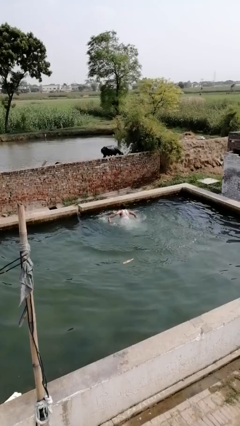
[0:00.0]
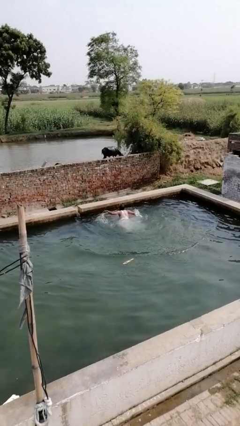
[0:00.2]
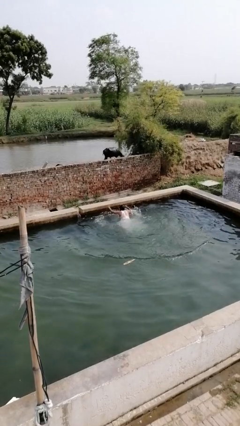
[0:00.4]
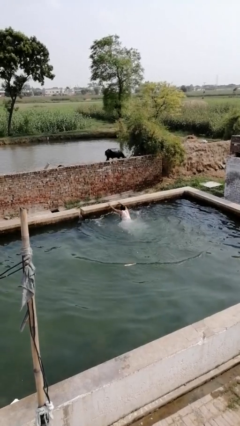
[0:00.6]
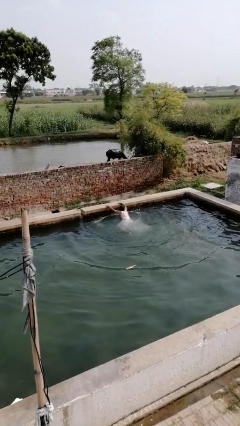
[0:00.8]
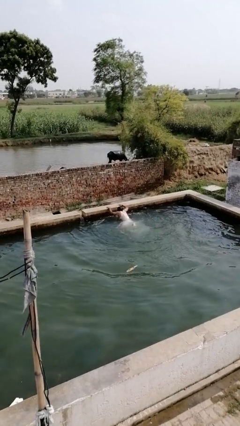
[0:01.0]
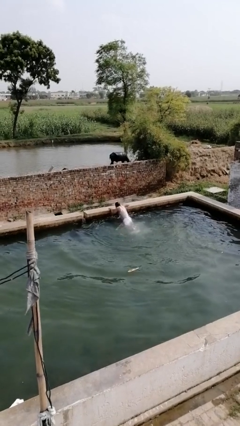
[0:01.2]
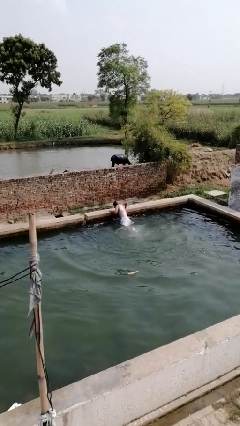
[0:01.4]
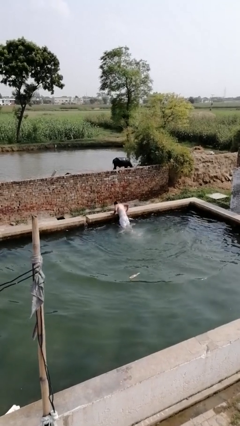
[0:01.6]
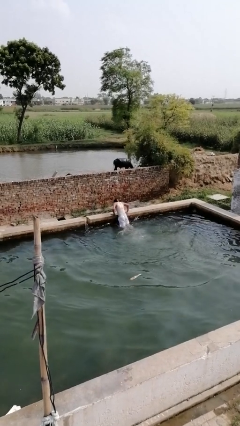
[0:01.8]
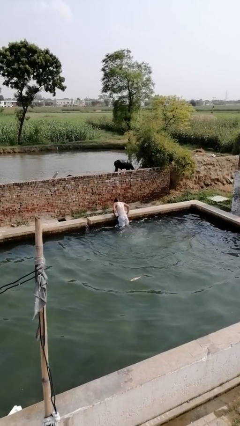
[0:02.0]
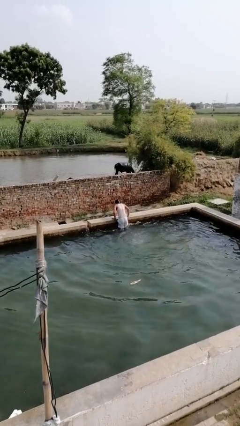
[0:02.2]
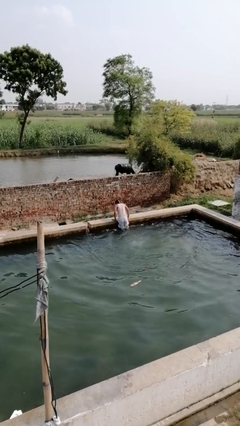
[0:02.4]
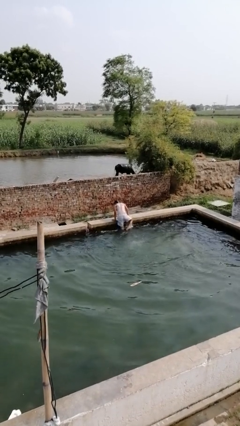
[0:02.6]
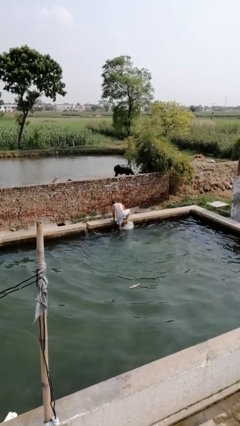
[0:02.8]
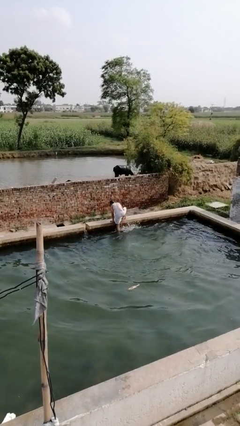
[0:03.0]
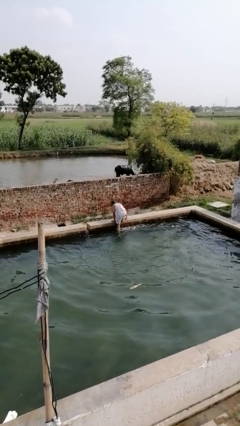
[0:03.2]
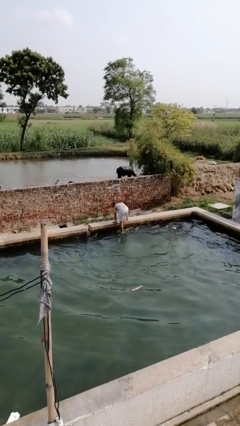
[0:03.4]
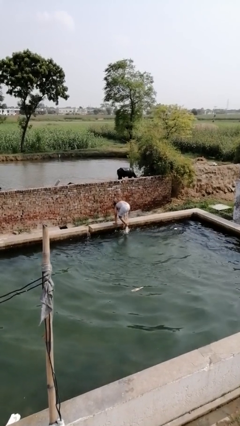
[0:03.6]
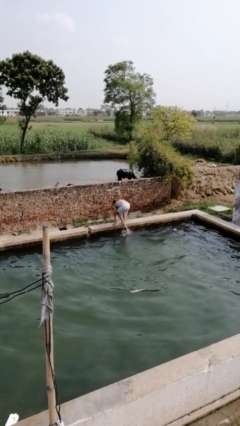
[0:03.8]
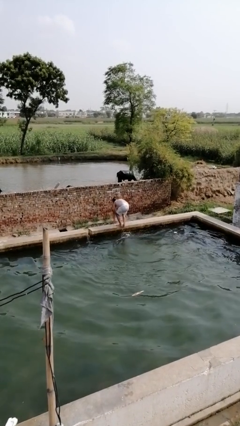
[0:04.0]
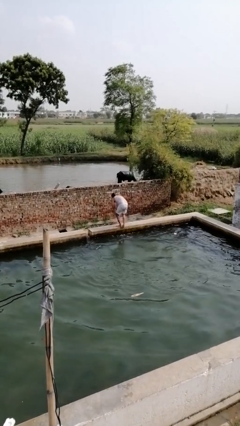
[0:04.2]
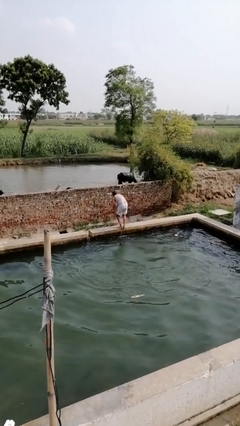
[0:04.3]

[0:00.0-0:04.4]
person exits pool

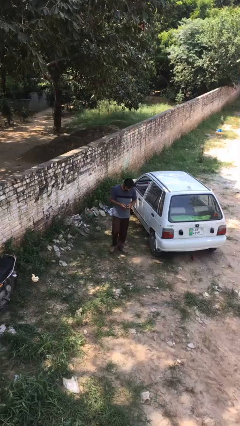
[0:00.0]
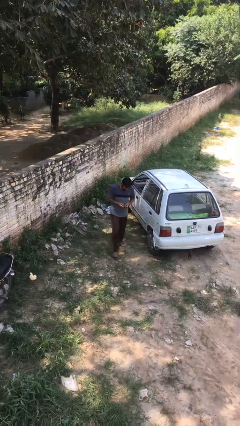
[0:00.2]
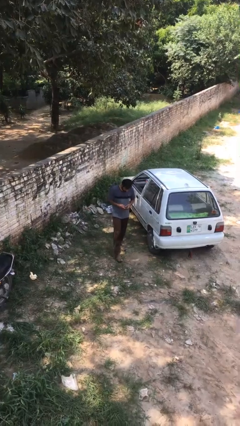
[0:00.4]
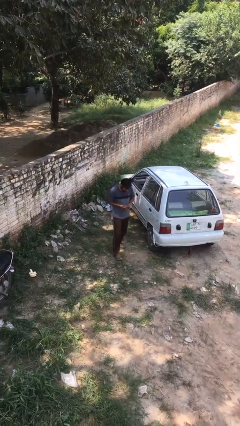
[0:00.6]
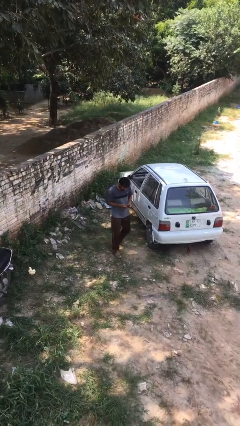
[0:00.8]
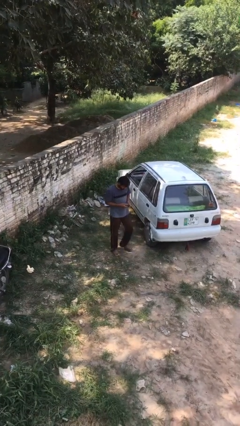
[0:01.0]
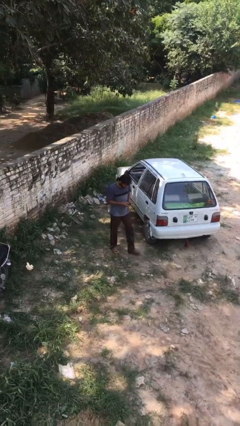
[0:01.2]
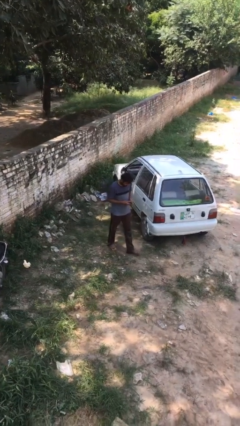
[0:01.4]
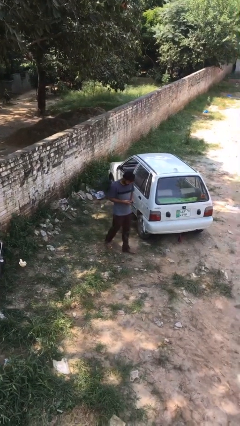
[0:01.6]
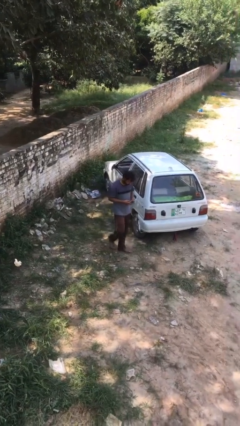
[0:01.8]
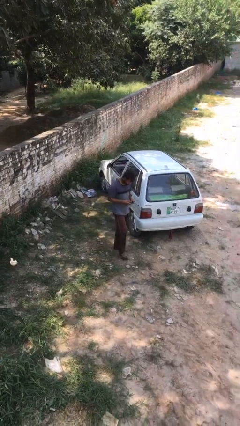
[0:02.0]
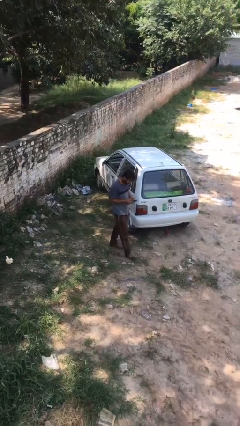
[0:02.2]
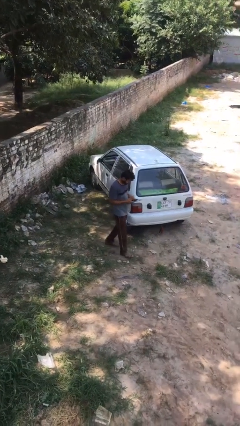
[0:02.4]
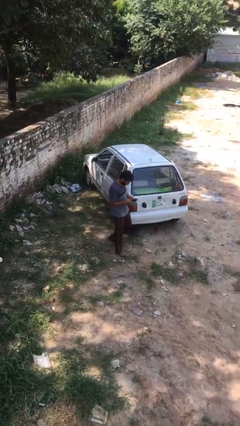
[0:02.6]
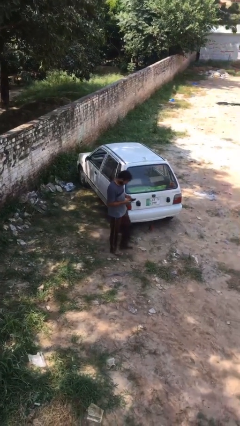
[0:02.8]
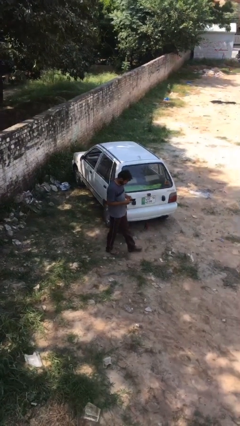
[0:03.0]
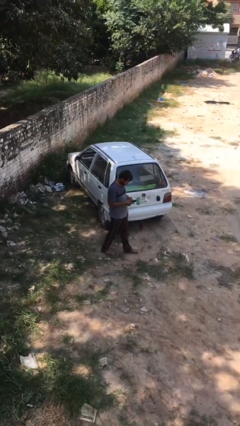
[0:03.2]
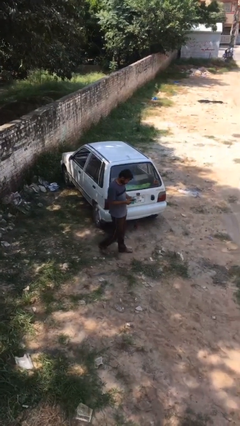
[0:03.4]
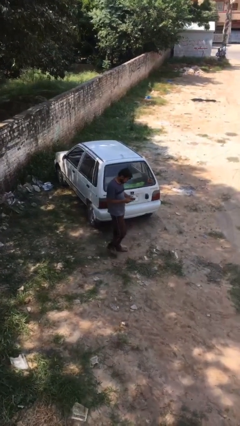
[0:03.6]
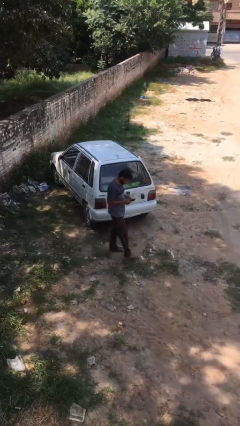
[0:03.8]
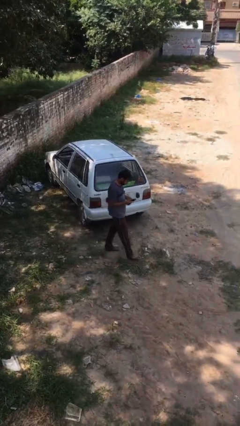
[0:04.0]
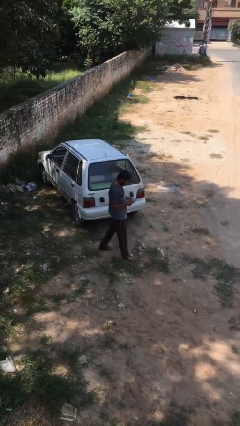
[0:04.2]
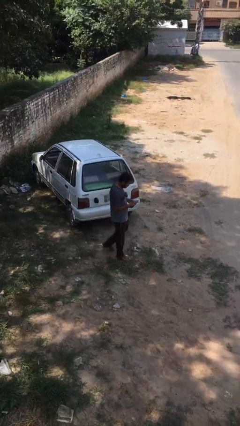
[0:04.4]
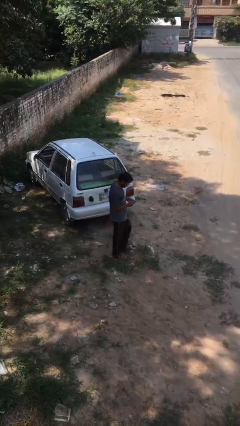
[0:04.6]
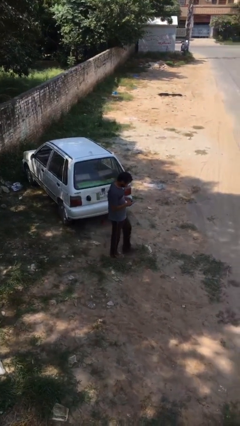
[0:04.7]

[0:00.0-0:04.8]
person texts on phone

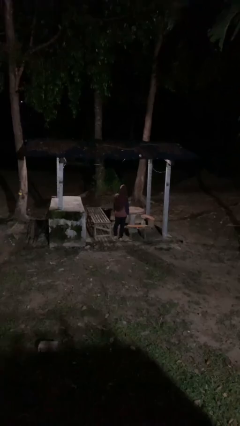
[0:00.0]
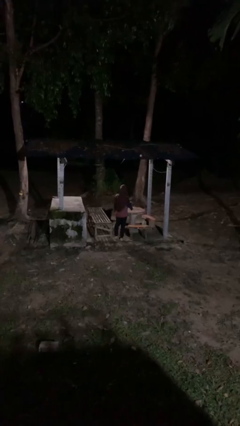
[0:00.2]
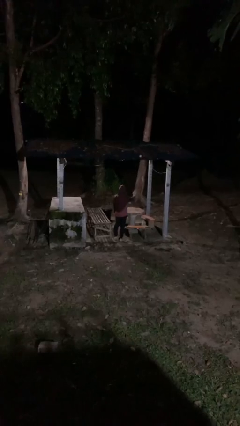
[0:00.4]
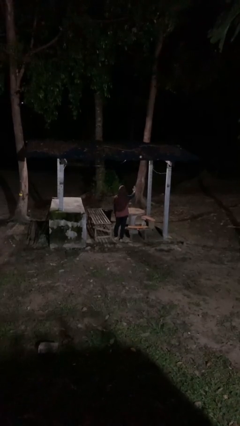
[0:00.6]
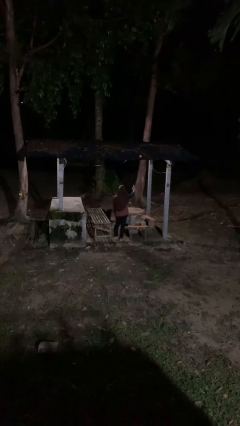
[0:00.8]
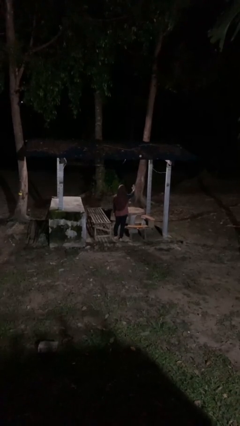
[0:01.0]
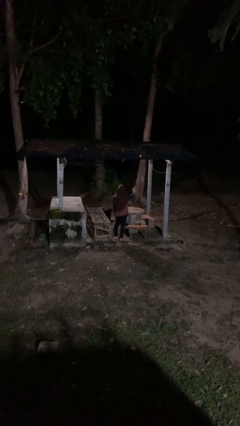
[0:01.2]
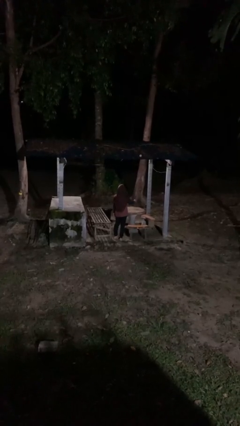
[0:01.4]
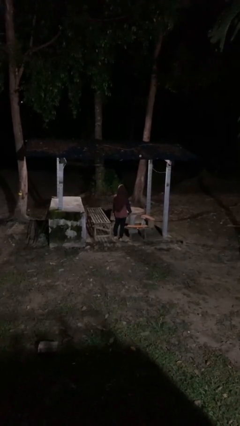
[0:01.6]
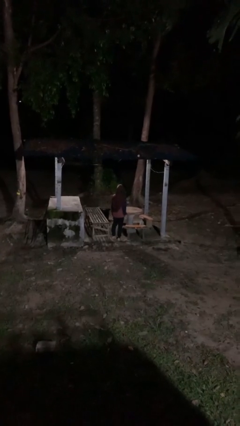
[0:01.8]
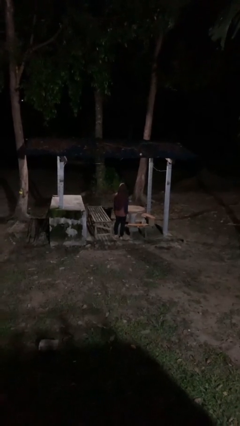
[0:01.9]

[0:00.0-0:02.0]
person gestures stop

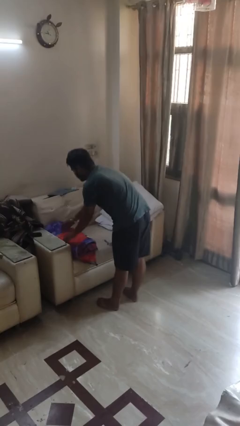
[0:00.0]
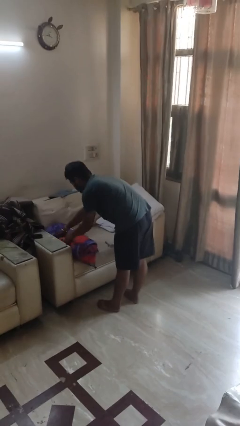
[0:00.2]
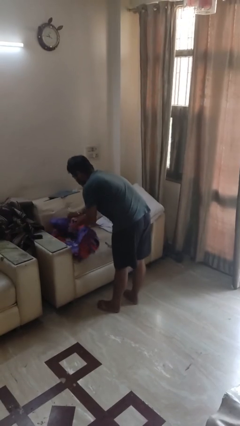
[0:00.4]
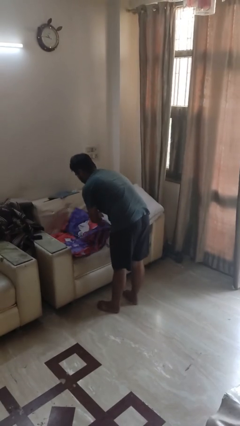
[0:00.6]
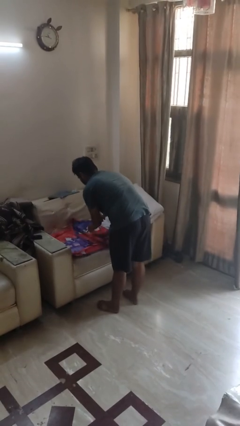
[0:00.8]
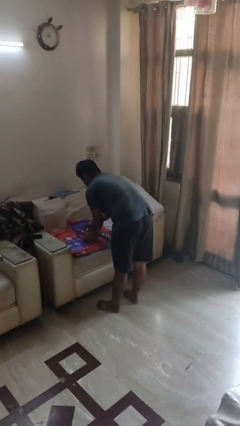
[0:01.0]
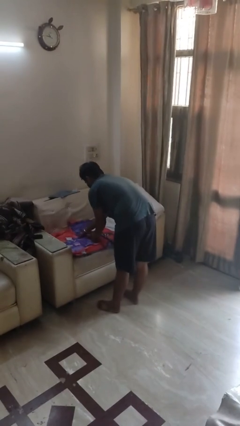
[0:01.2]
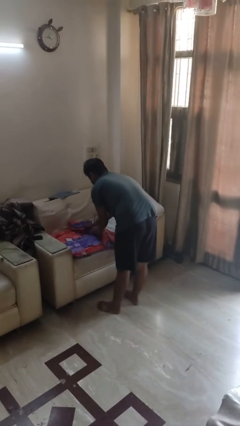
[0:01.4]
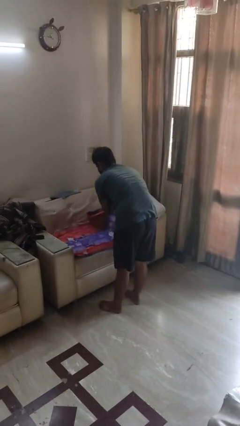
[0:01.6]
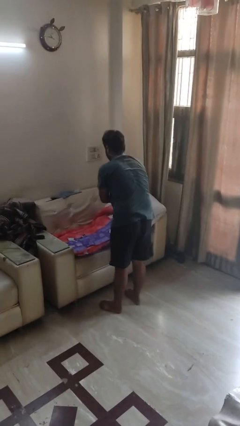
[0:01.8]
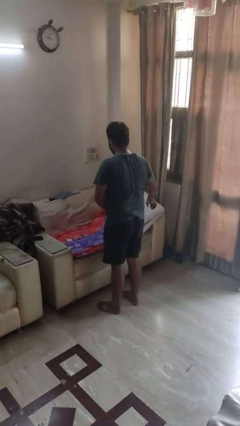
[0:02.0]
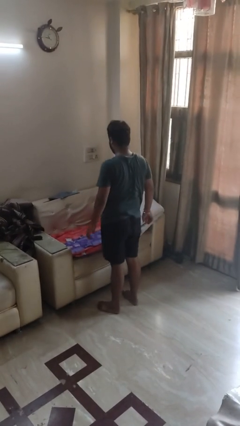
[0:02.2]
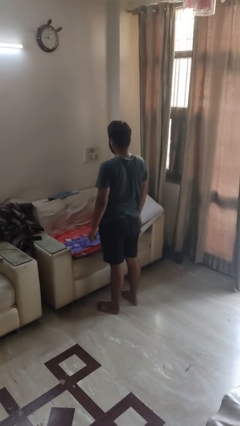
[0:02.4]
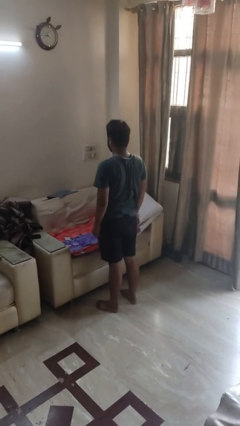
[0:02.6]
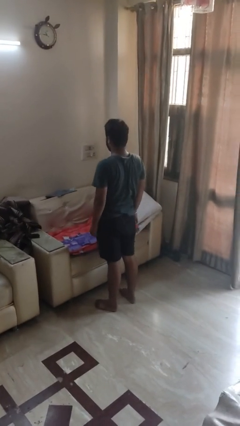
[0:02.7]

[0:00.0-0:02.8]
person unfolds blanket

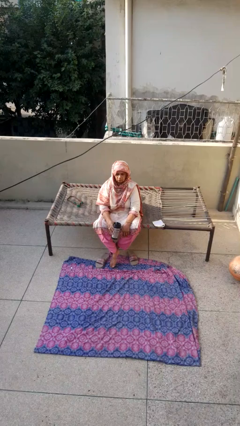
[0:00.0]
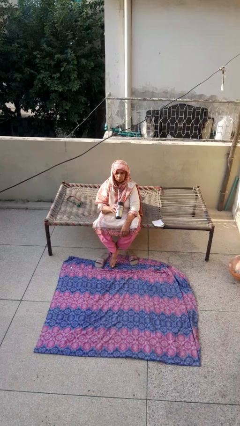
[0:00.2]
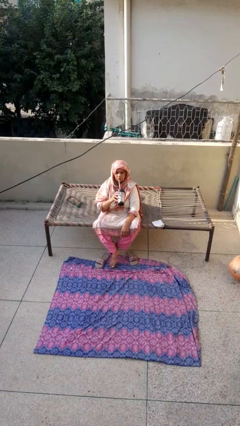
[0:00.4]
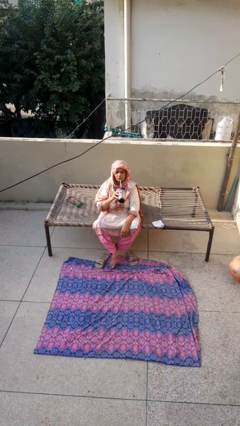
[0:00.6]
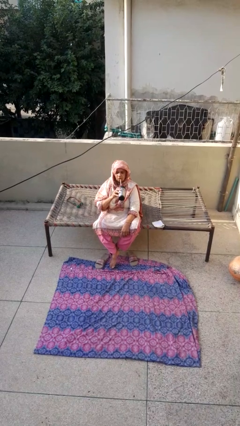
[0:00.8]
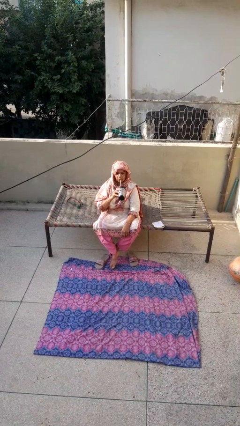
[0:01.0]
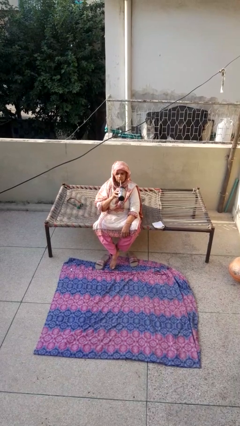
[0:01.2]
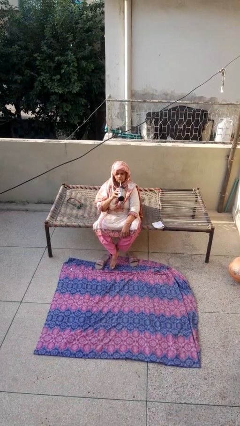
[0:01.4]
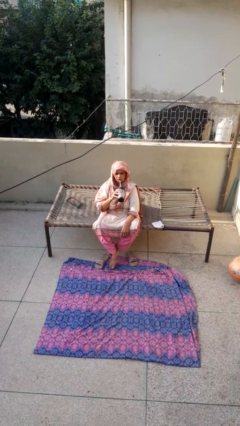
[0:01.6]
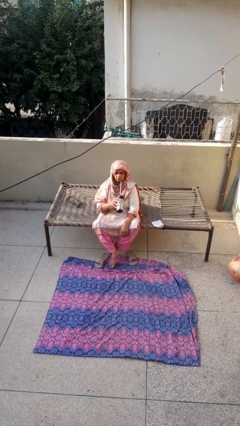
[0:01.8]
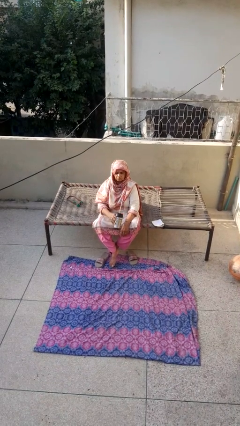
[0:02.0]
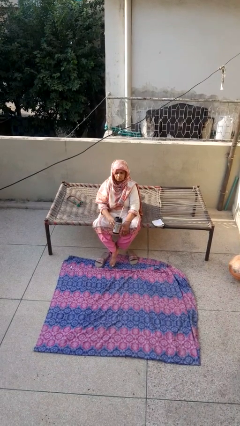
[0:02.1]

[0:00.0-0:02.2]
person drinks from straw

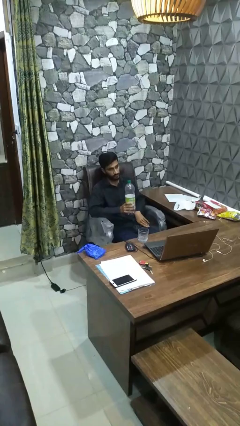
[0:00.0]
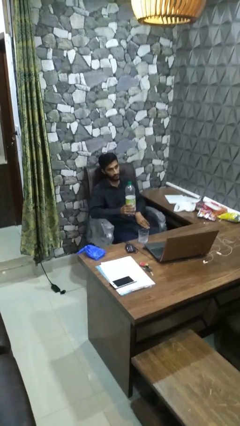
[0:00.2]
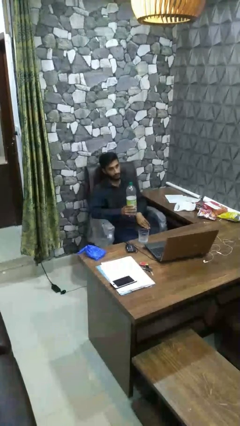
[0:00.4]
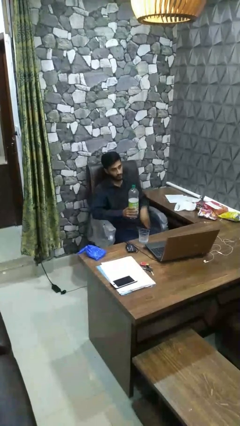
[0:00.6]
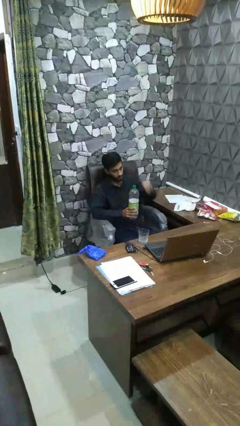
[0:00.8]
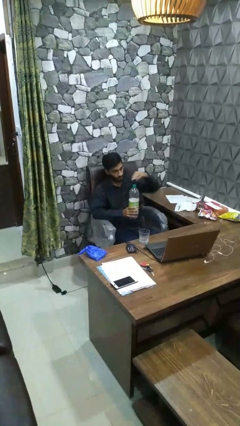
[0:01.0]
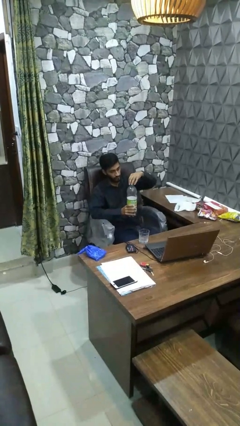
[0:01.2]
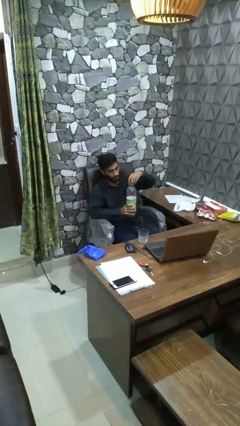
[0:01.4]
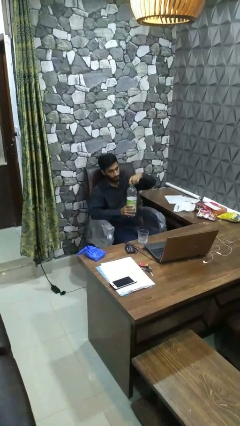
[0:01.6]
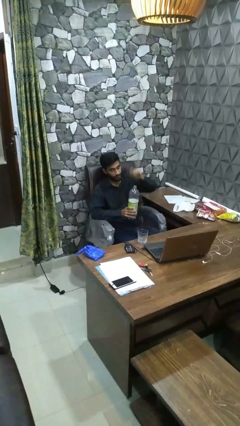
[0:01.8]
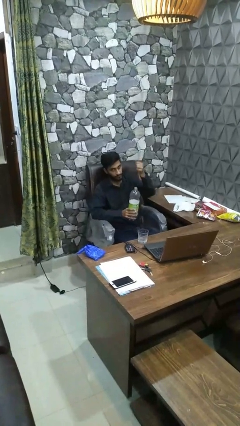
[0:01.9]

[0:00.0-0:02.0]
person unscrews lid from bottle
